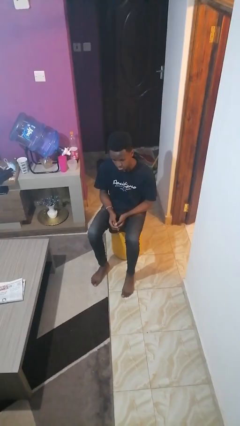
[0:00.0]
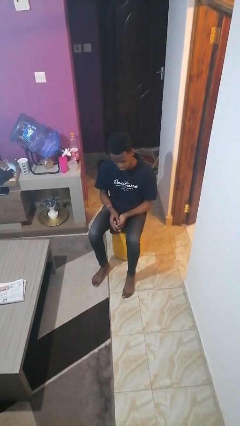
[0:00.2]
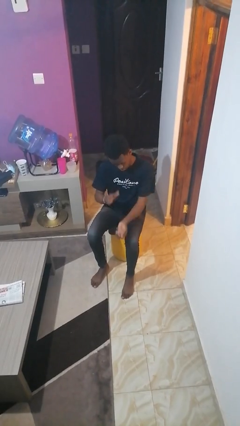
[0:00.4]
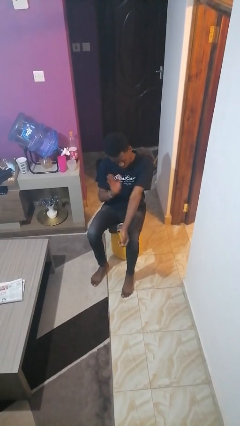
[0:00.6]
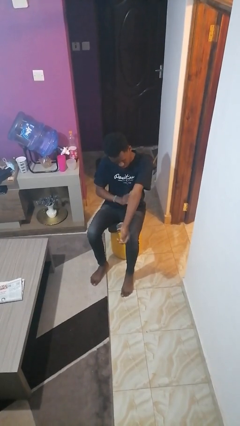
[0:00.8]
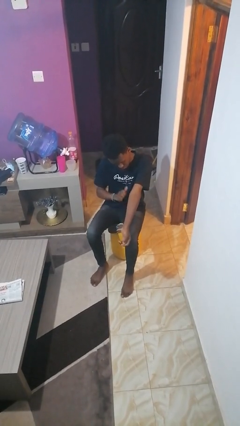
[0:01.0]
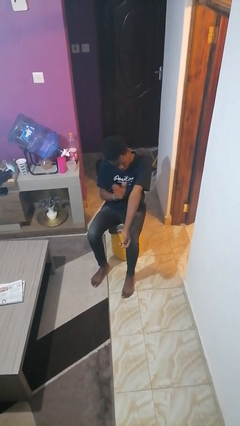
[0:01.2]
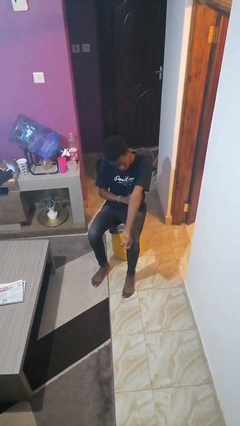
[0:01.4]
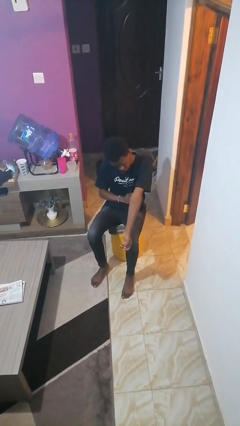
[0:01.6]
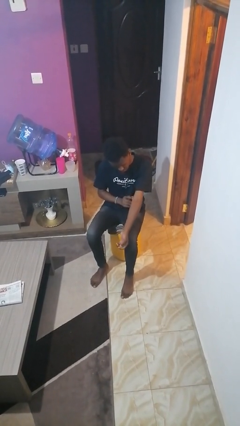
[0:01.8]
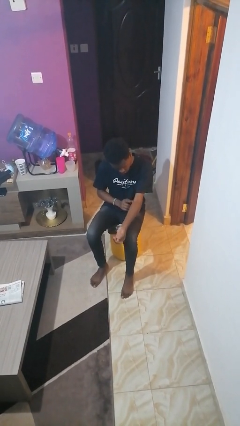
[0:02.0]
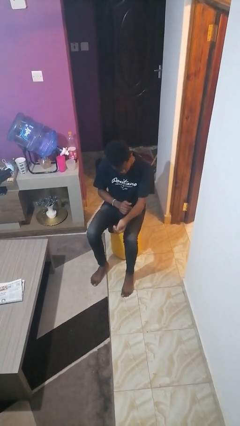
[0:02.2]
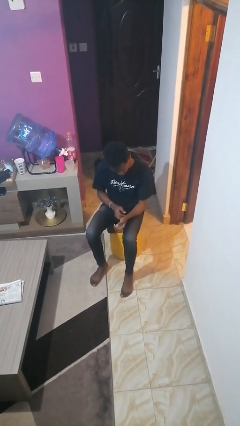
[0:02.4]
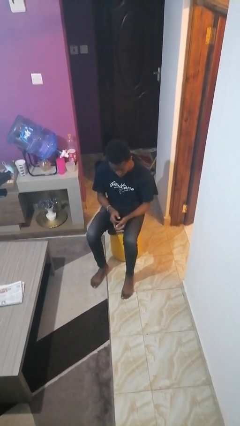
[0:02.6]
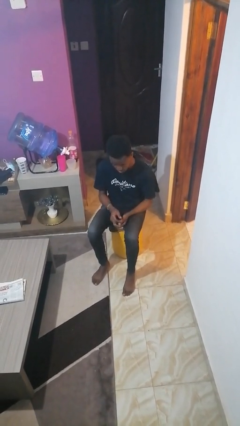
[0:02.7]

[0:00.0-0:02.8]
person swats bug

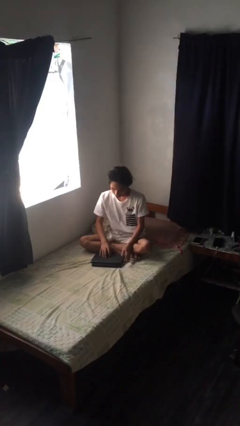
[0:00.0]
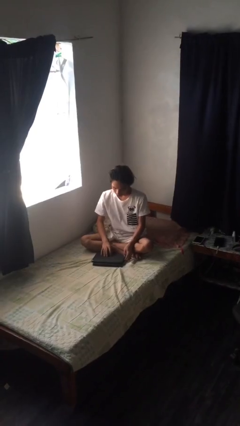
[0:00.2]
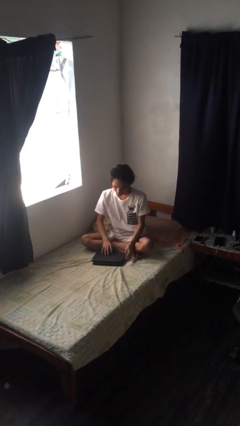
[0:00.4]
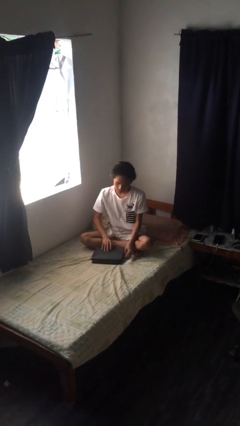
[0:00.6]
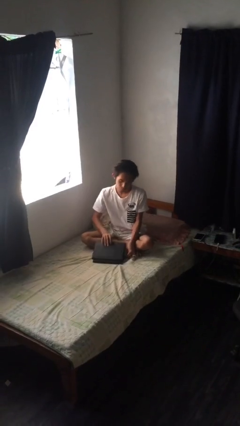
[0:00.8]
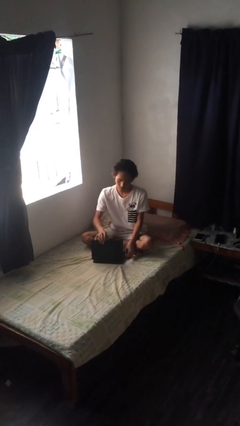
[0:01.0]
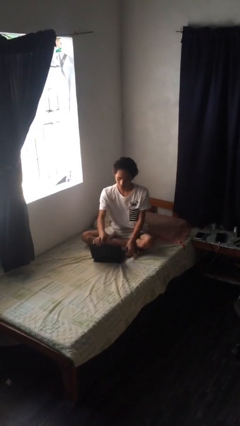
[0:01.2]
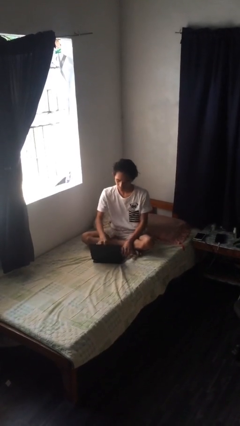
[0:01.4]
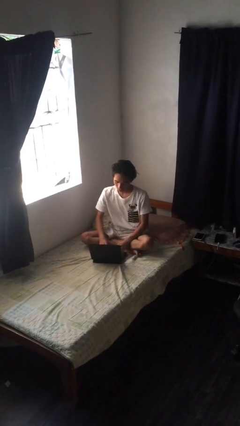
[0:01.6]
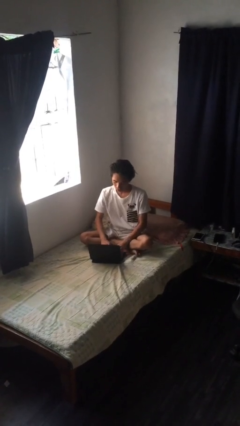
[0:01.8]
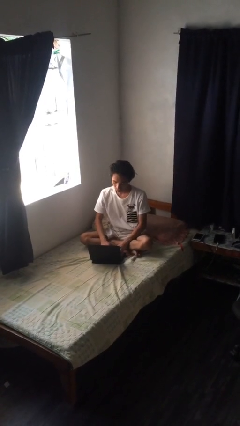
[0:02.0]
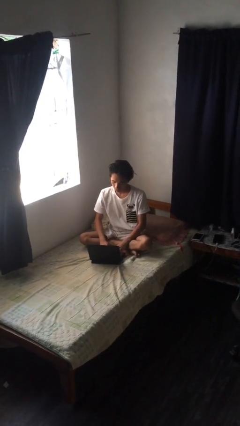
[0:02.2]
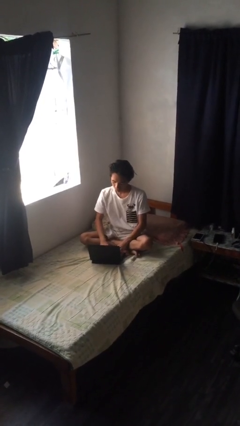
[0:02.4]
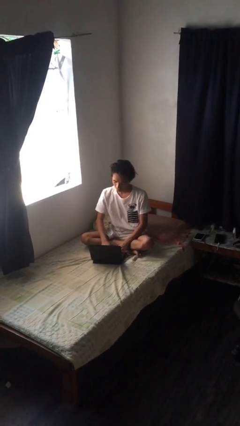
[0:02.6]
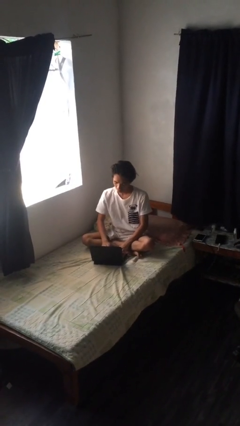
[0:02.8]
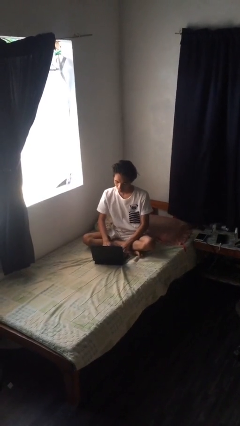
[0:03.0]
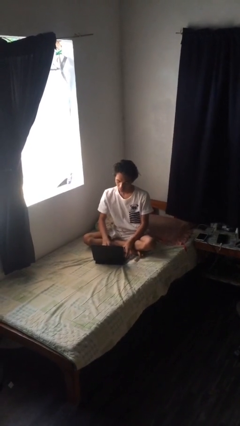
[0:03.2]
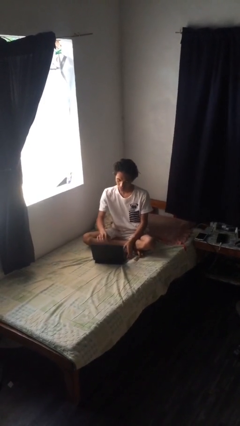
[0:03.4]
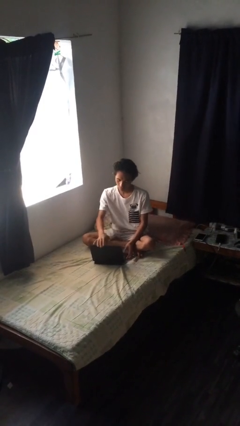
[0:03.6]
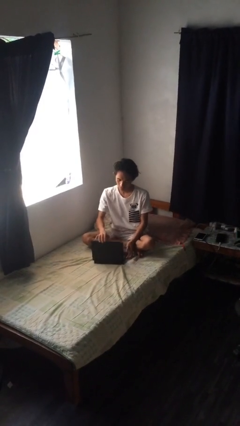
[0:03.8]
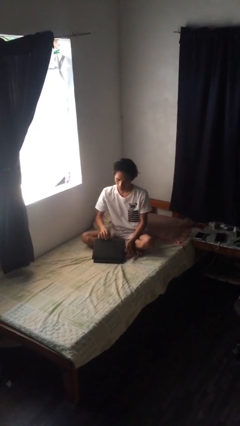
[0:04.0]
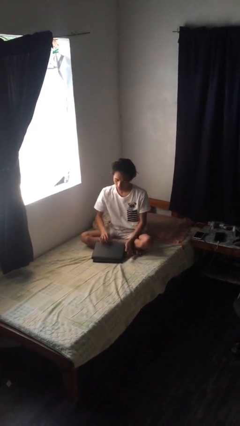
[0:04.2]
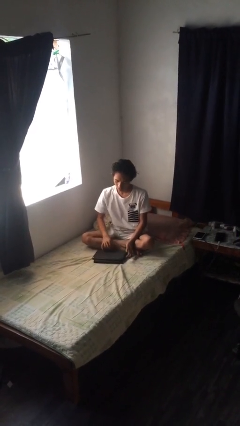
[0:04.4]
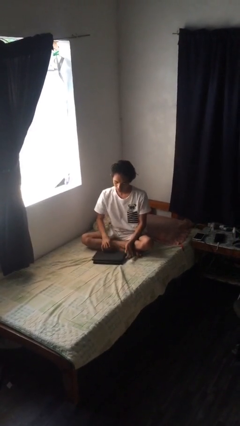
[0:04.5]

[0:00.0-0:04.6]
person interacts with laptop

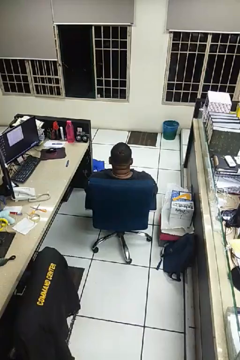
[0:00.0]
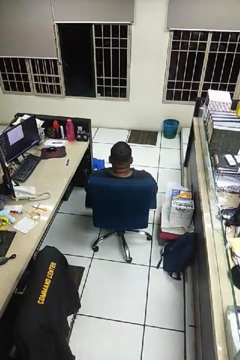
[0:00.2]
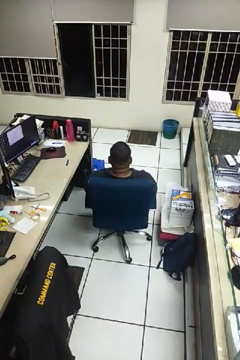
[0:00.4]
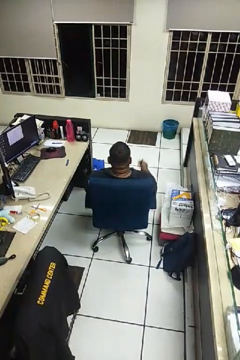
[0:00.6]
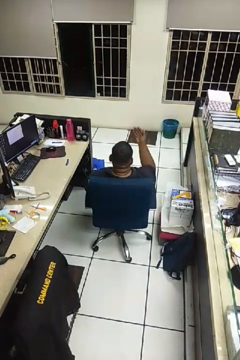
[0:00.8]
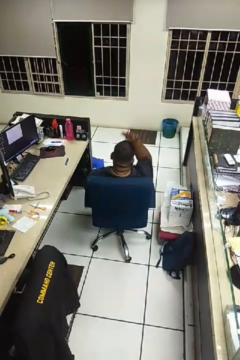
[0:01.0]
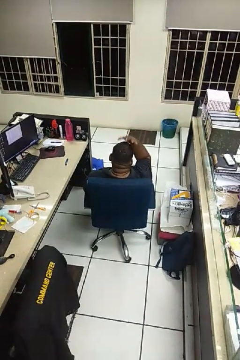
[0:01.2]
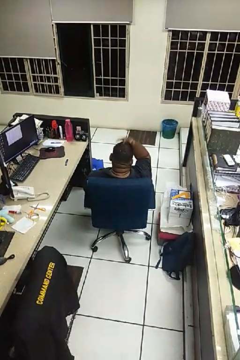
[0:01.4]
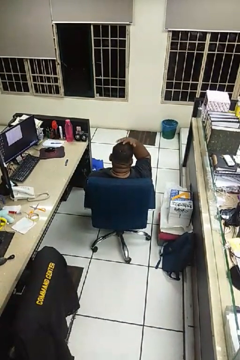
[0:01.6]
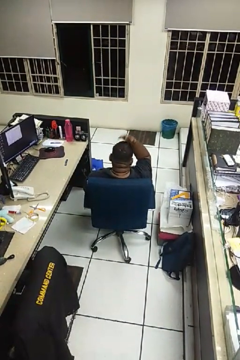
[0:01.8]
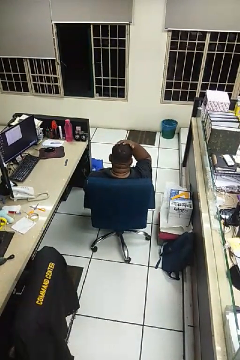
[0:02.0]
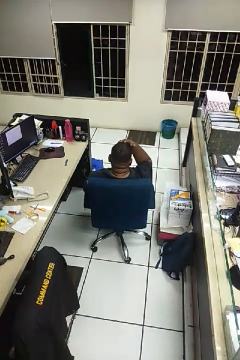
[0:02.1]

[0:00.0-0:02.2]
person pats head

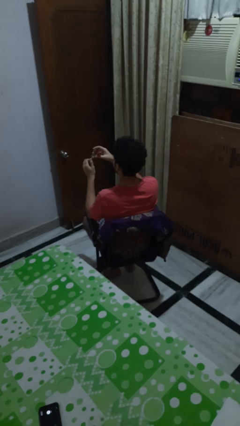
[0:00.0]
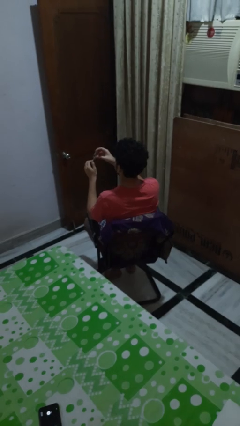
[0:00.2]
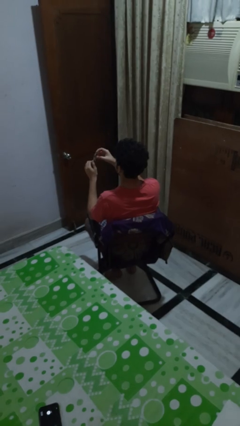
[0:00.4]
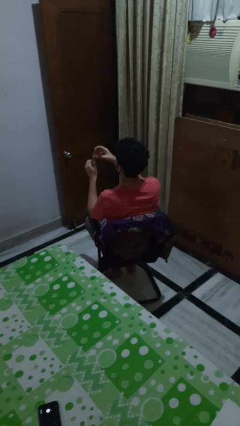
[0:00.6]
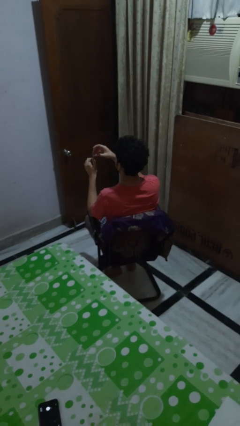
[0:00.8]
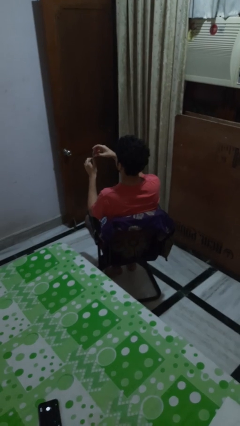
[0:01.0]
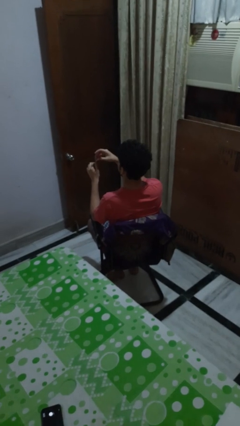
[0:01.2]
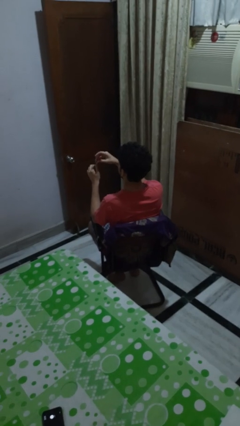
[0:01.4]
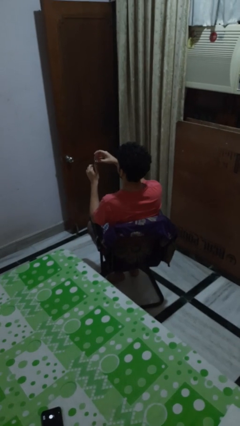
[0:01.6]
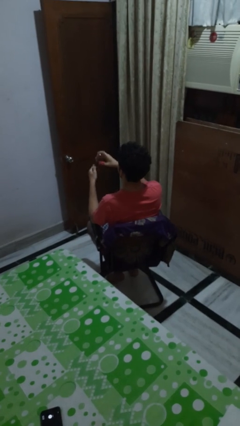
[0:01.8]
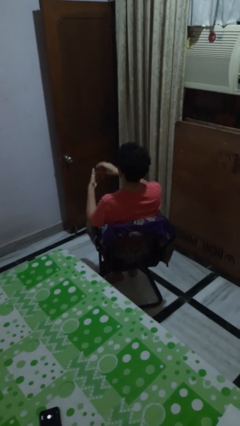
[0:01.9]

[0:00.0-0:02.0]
person clips fingernails

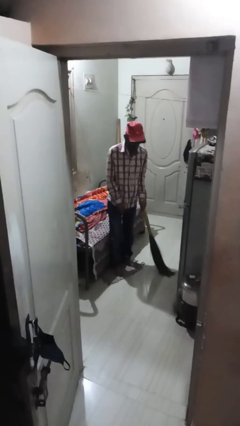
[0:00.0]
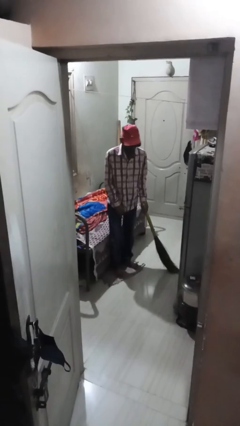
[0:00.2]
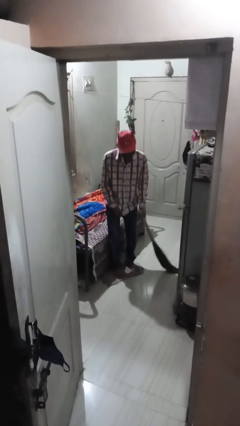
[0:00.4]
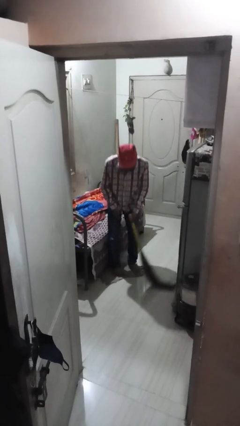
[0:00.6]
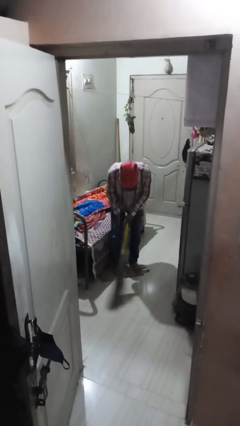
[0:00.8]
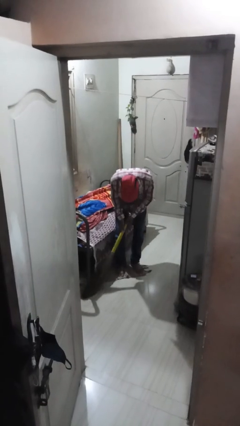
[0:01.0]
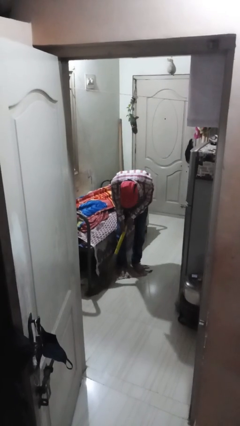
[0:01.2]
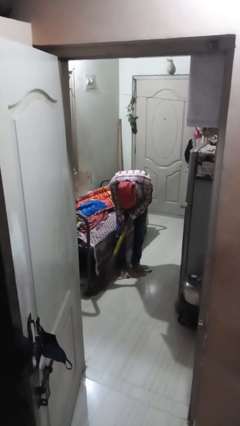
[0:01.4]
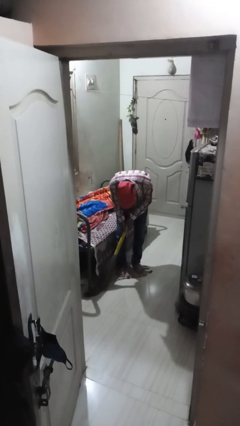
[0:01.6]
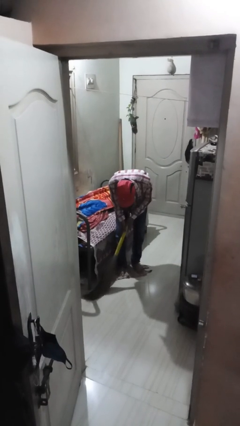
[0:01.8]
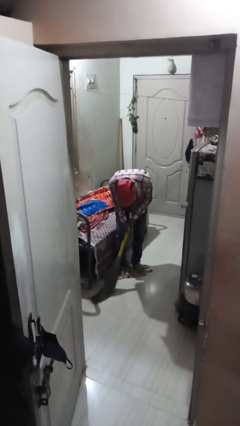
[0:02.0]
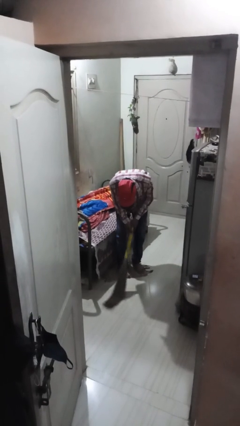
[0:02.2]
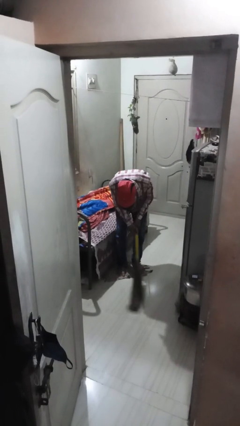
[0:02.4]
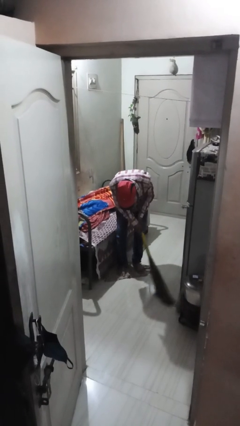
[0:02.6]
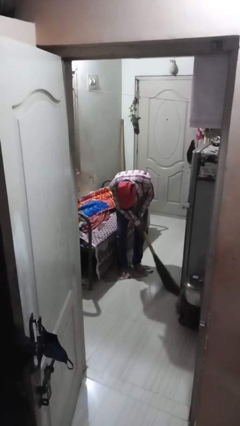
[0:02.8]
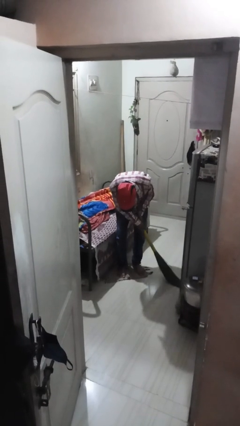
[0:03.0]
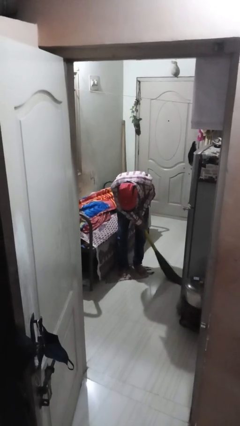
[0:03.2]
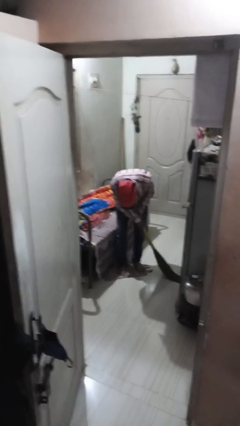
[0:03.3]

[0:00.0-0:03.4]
person sweeps floor

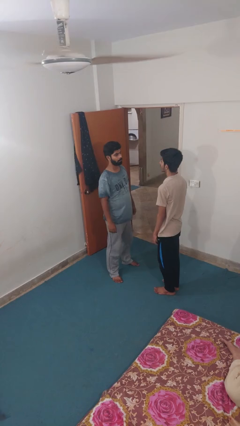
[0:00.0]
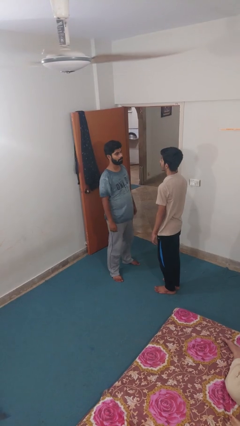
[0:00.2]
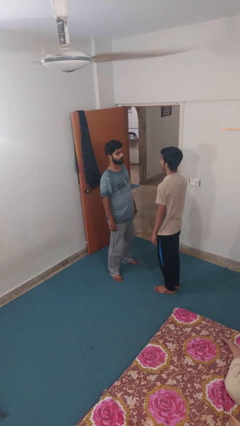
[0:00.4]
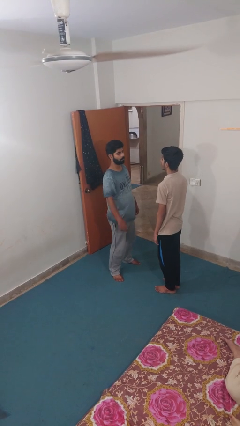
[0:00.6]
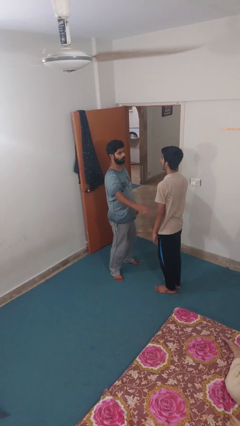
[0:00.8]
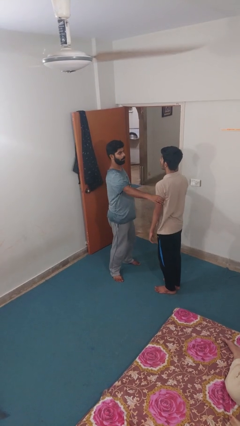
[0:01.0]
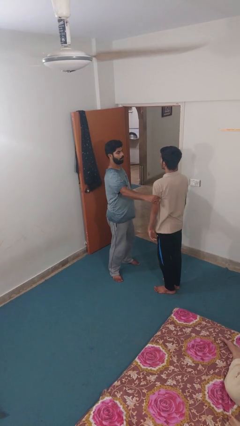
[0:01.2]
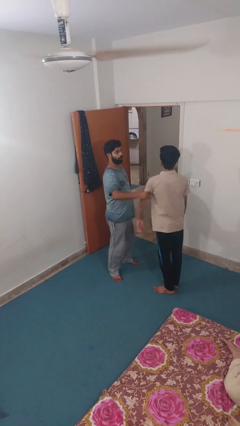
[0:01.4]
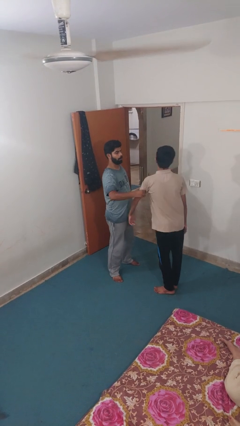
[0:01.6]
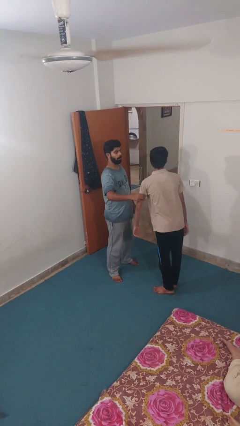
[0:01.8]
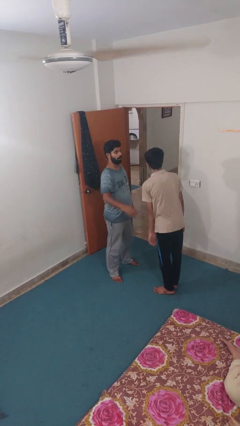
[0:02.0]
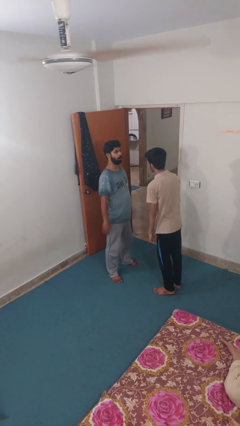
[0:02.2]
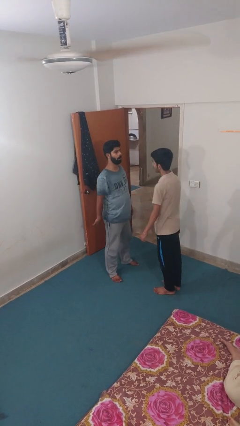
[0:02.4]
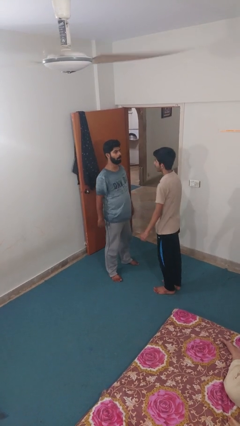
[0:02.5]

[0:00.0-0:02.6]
person grabs person by bicep
